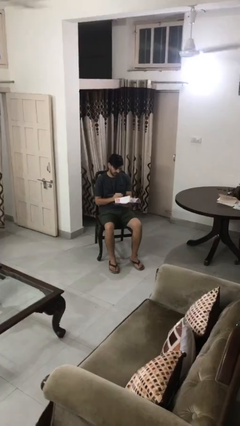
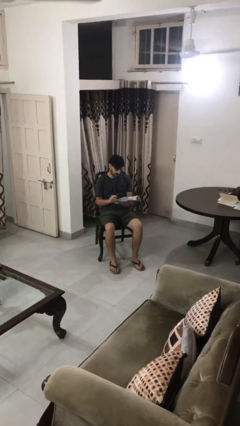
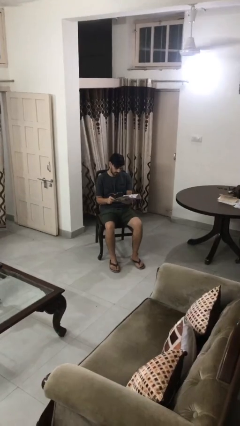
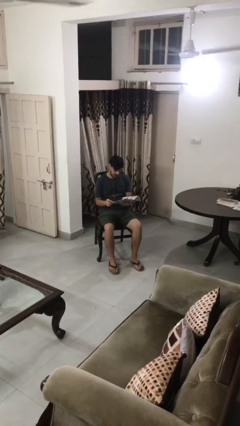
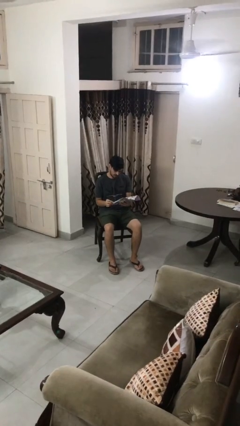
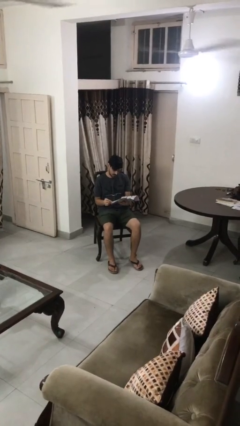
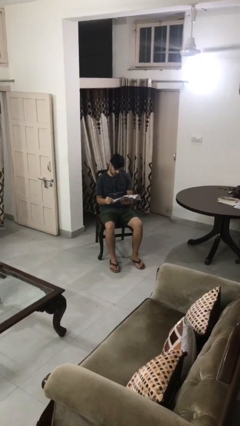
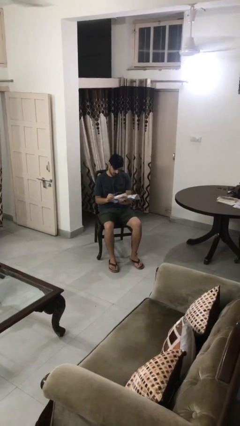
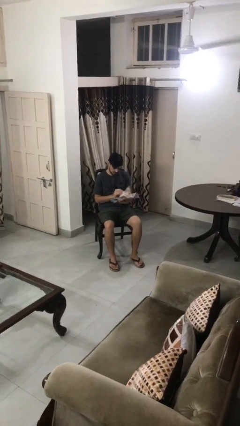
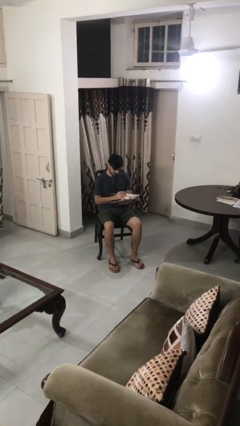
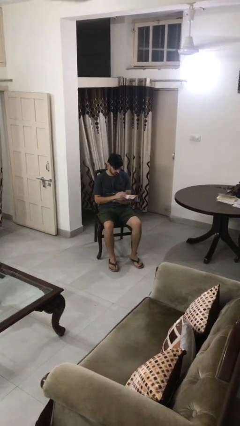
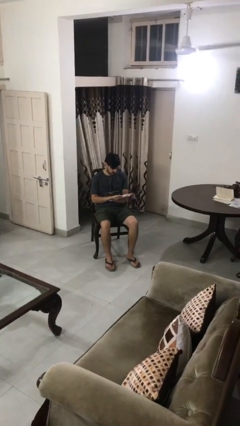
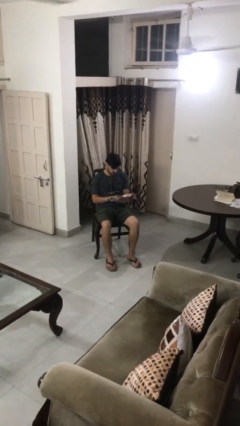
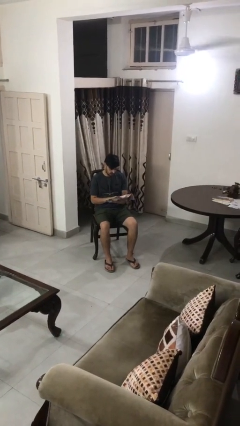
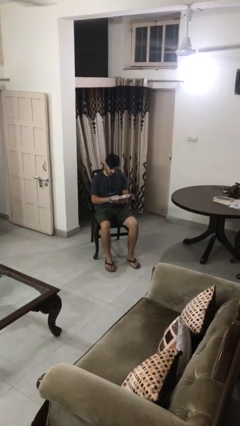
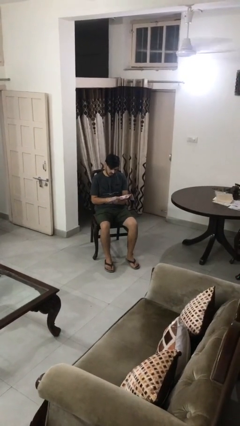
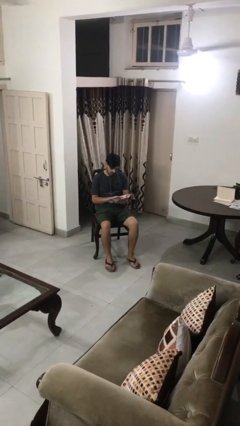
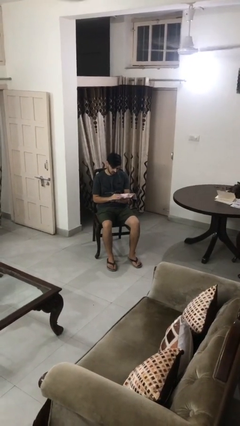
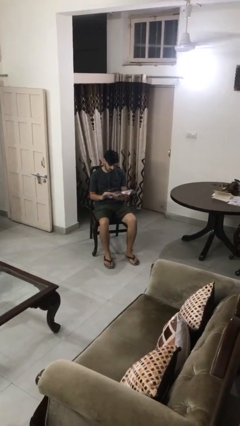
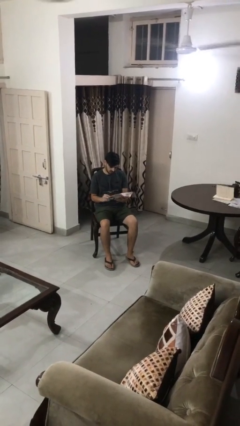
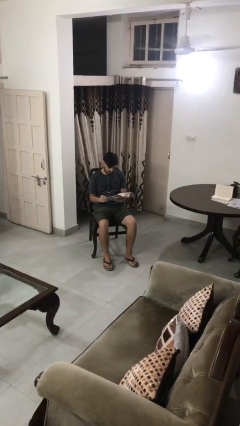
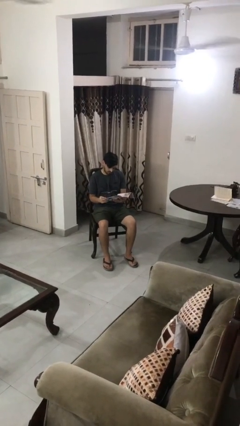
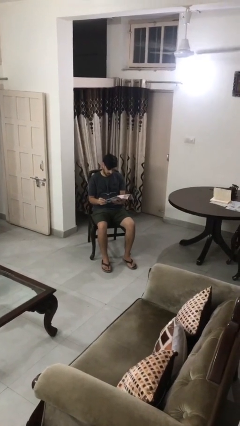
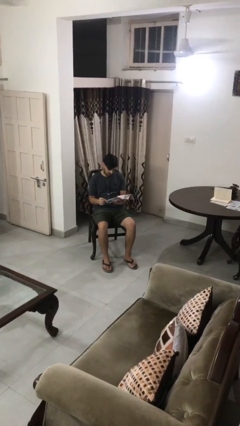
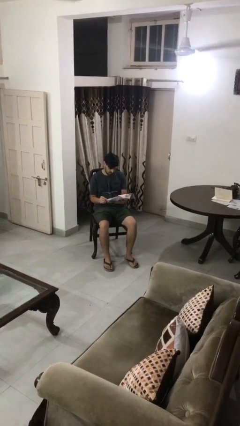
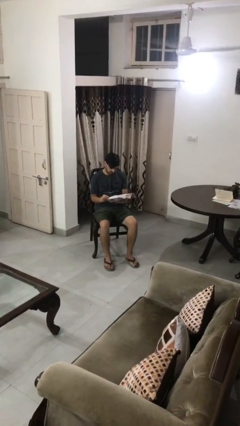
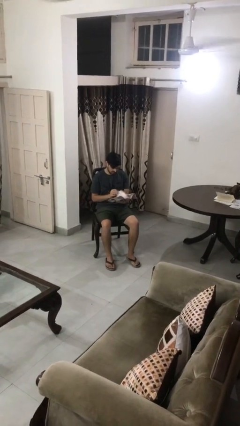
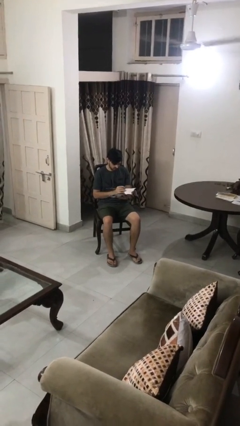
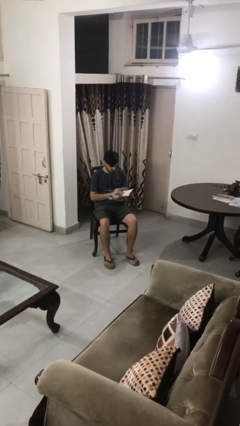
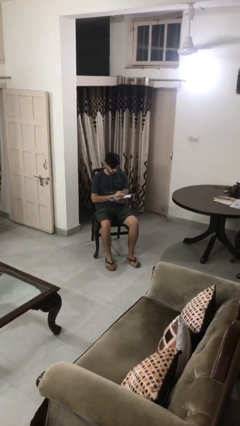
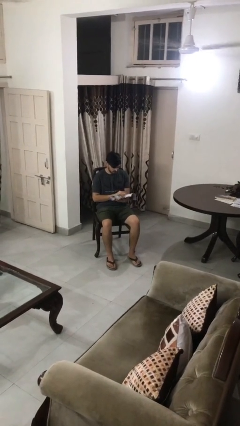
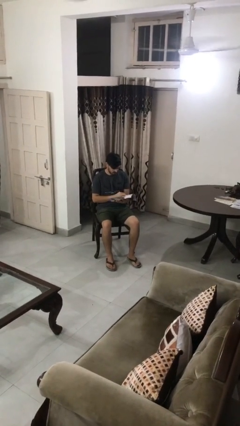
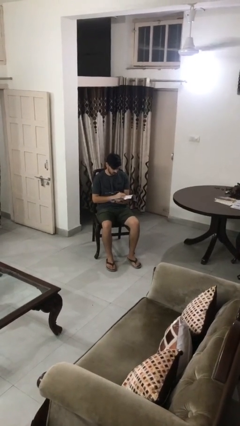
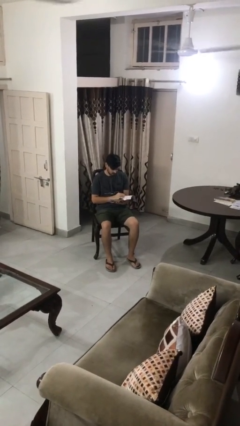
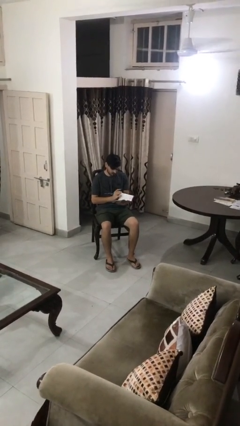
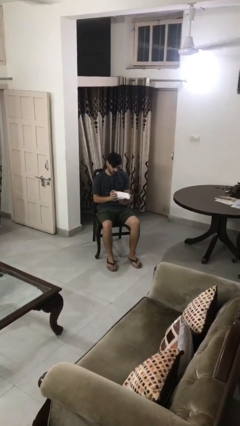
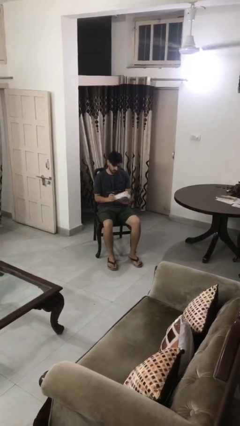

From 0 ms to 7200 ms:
person reads magazine

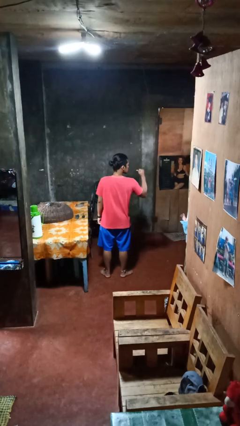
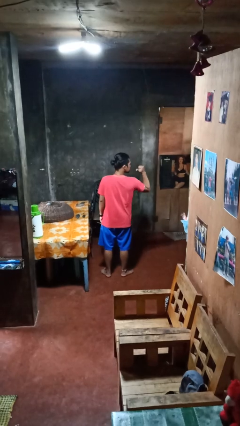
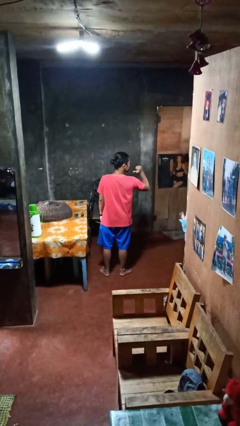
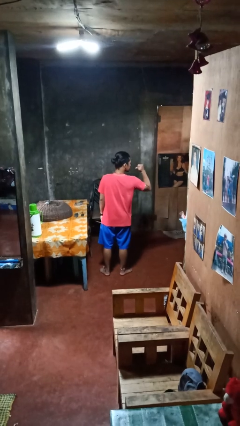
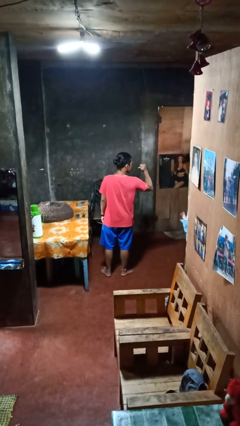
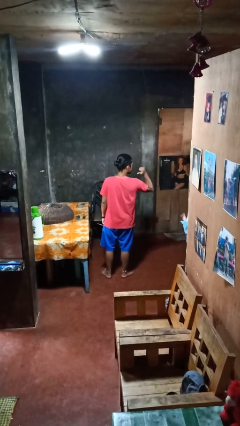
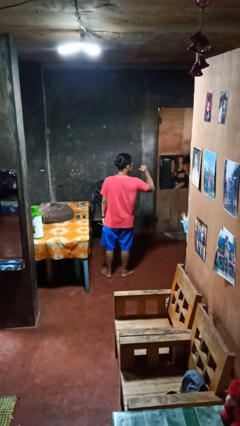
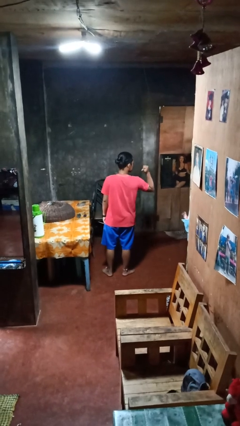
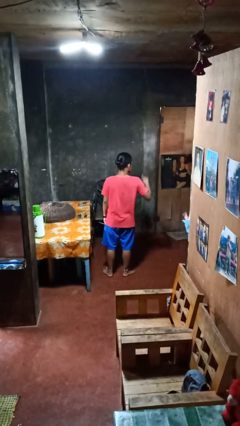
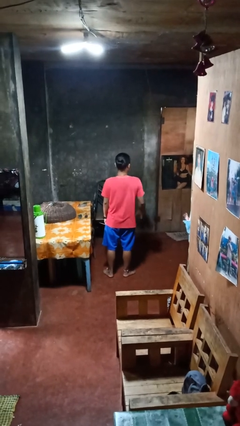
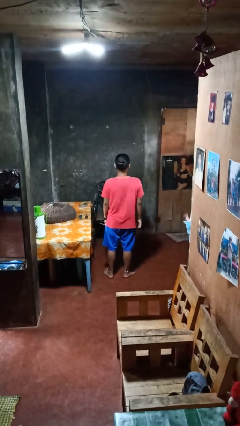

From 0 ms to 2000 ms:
person gestures behind me

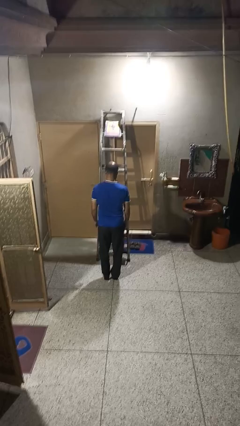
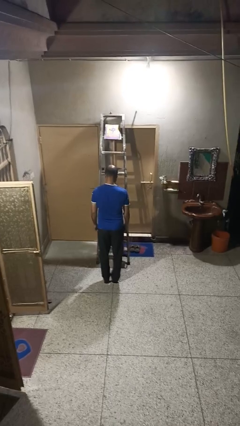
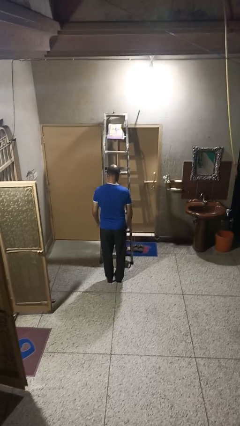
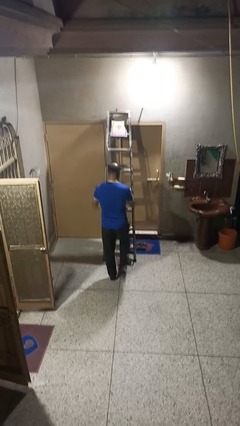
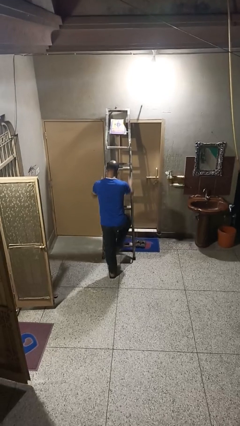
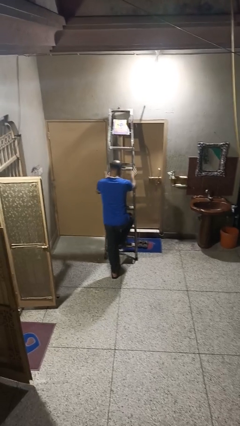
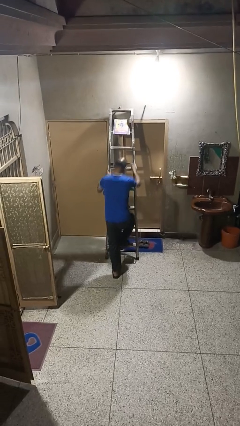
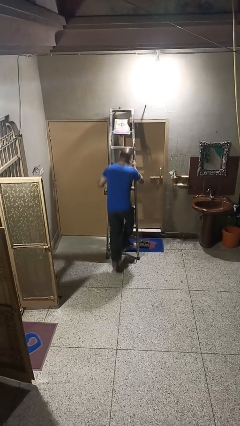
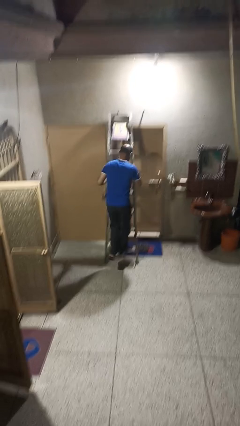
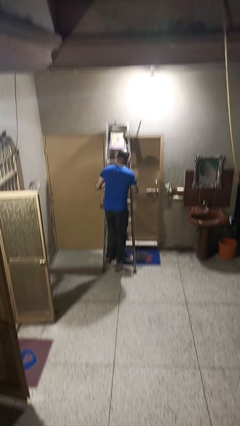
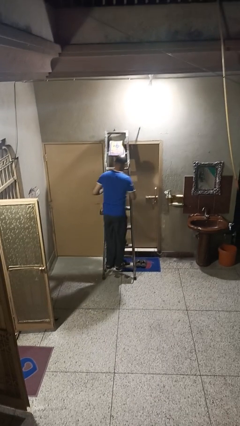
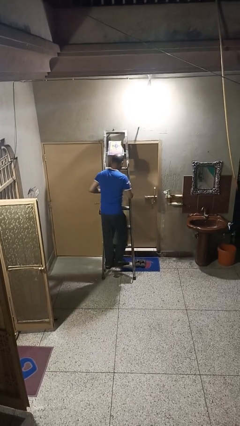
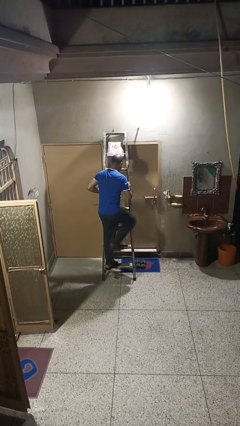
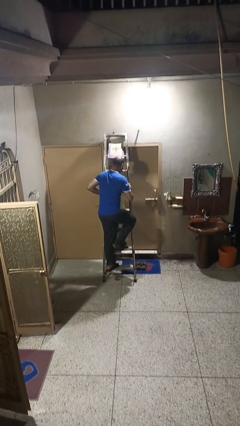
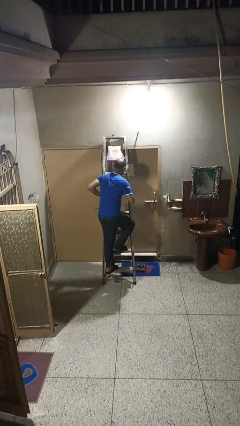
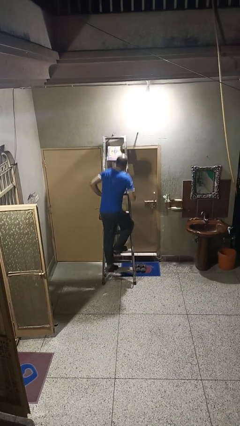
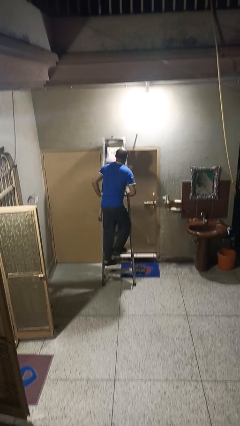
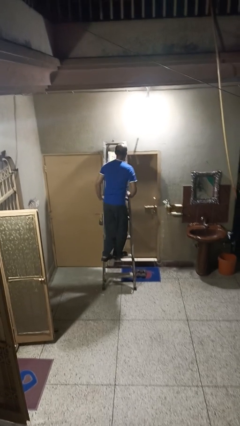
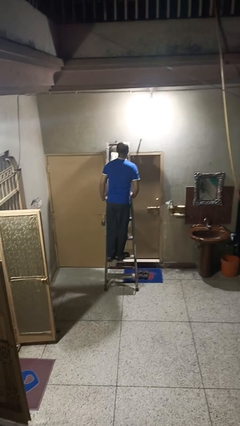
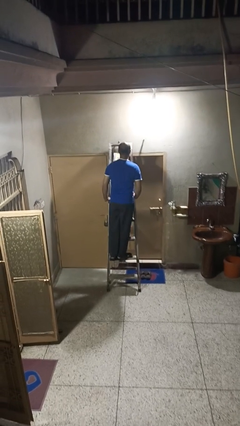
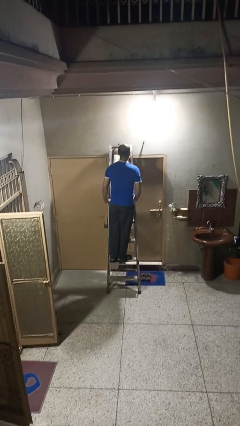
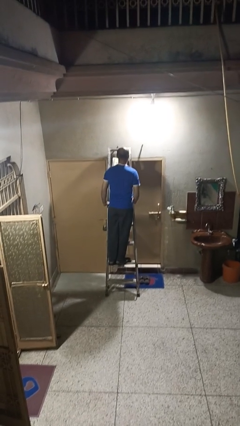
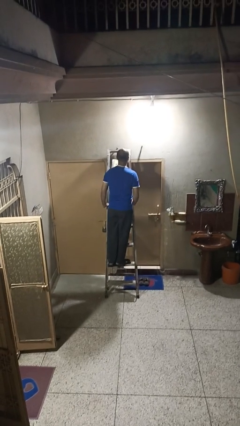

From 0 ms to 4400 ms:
person climbs up ladder

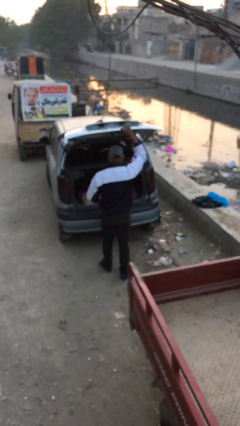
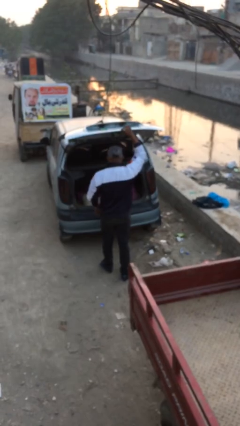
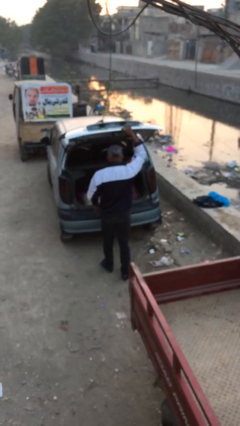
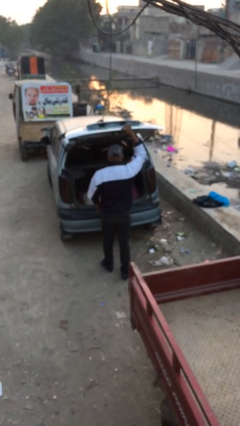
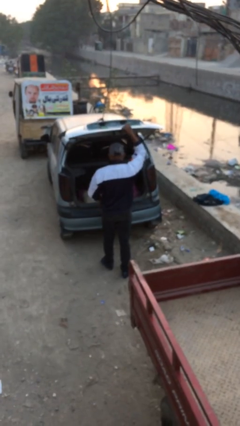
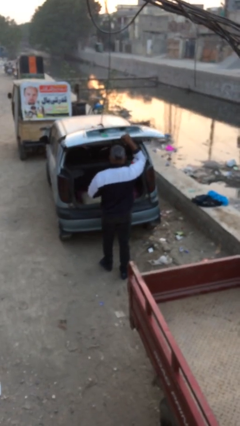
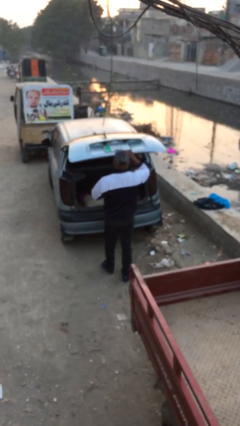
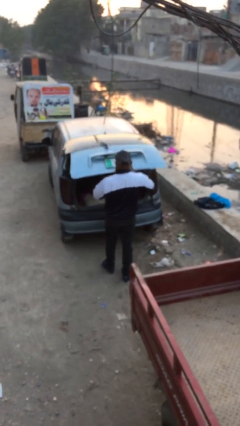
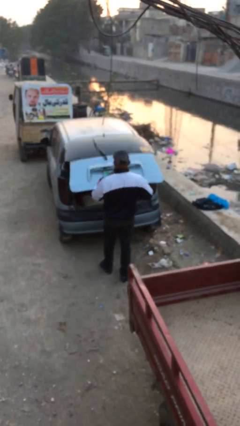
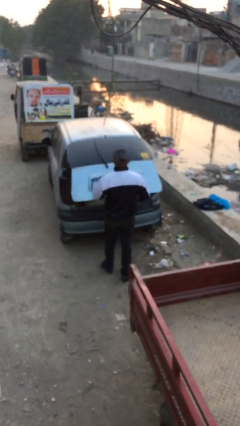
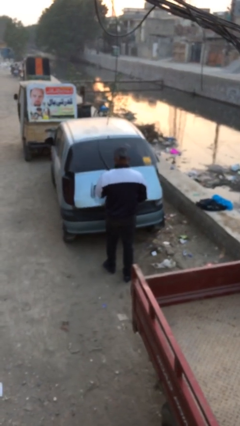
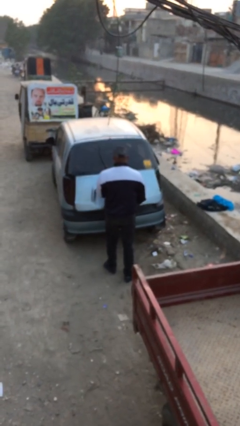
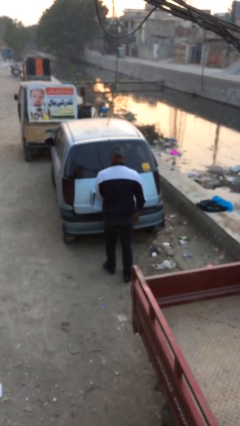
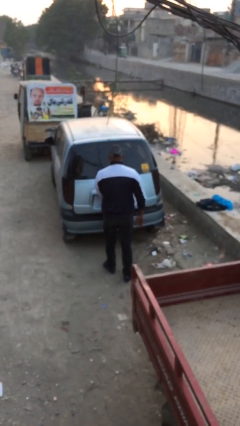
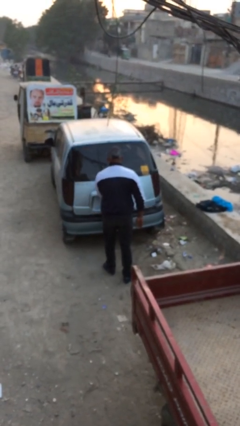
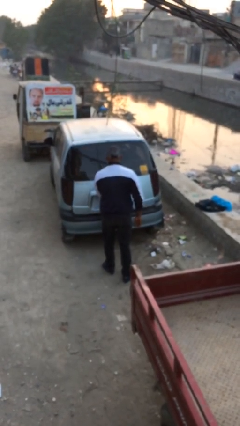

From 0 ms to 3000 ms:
person closes car trunk

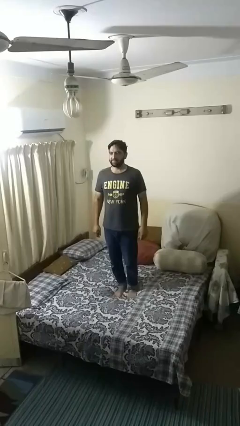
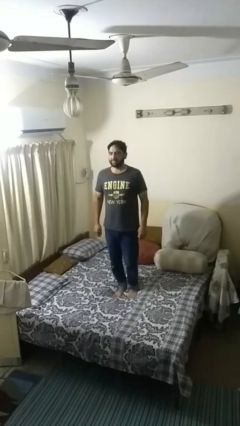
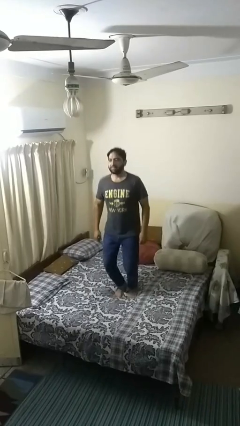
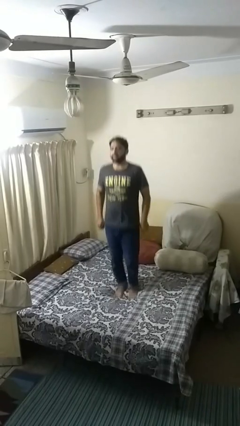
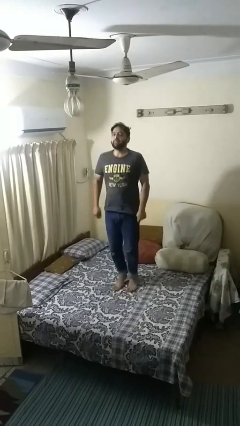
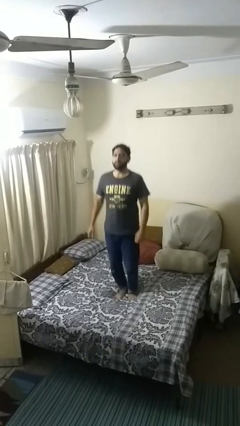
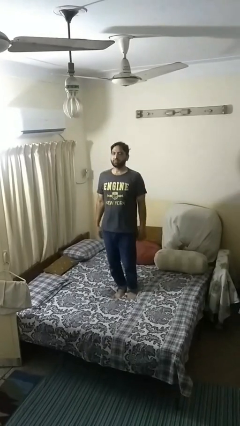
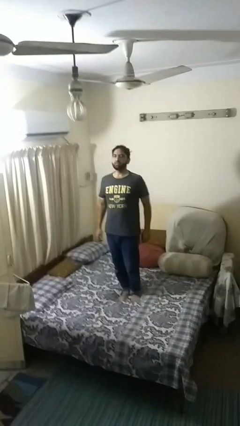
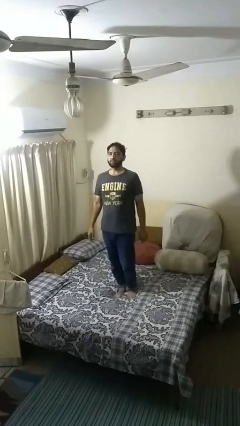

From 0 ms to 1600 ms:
person jumps on bed
